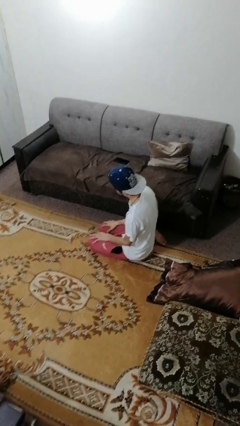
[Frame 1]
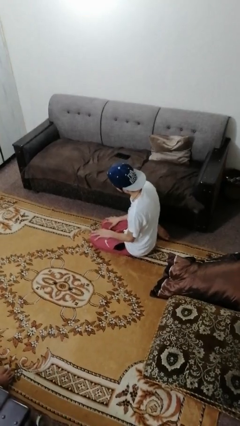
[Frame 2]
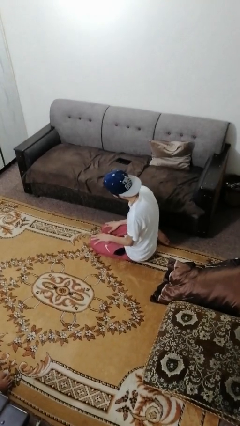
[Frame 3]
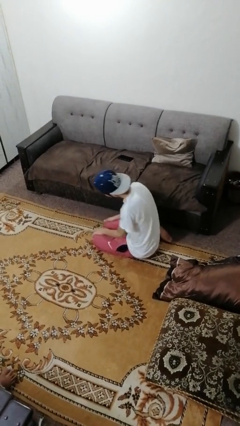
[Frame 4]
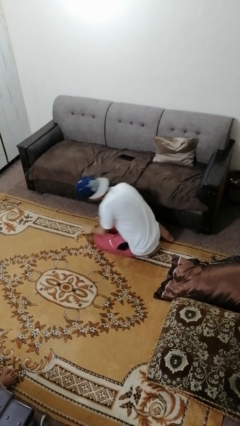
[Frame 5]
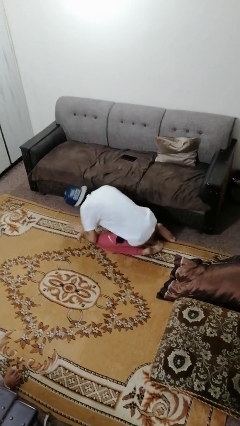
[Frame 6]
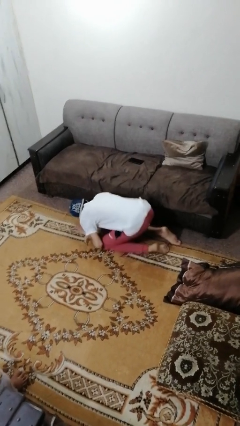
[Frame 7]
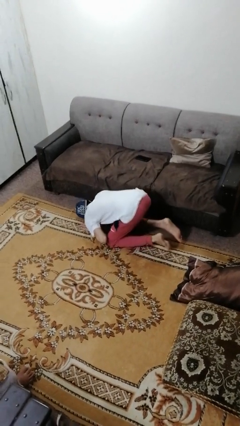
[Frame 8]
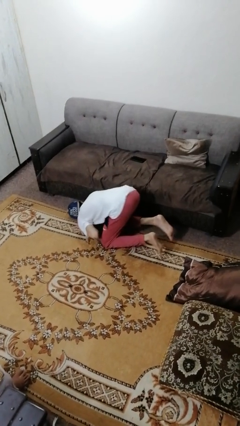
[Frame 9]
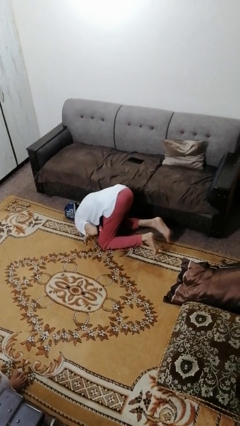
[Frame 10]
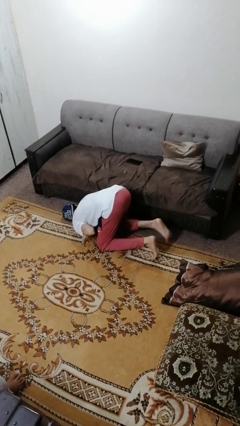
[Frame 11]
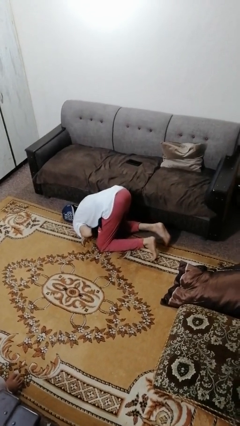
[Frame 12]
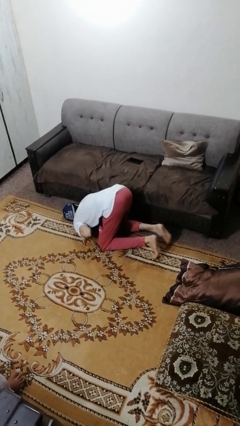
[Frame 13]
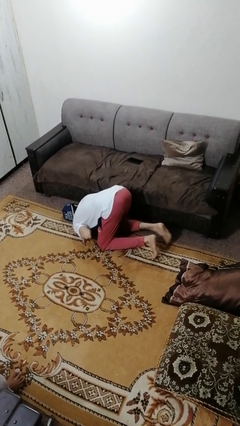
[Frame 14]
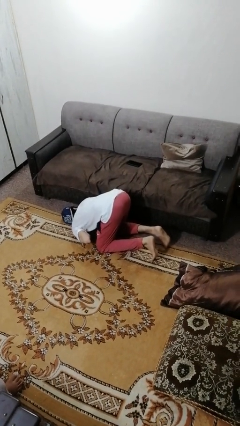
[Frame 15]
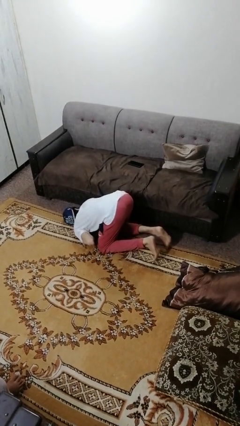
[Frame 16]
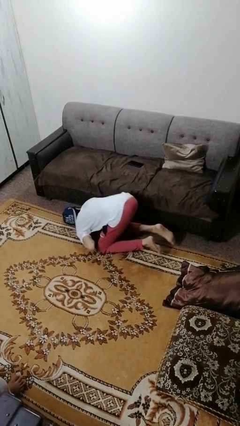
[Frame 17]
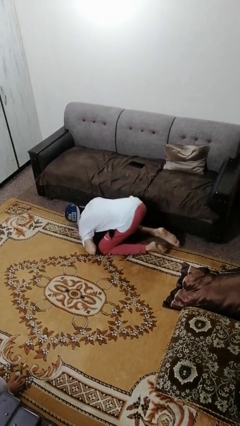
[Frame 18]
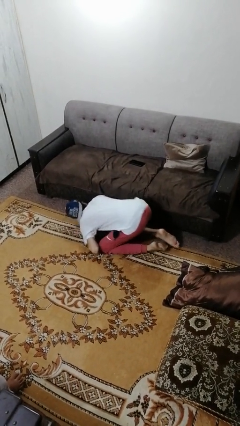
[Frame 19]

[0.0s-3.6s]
person searches under couch

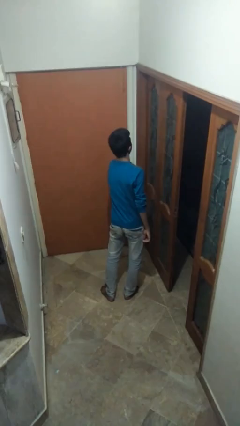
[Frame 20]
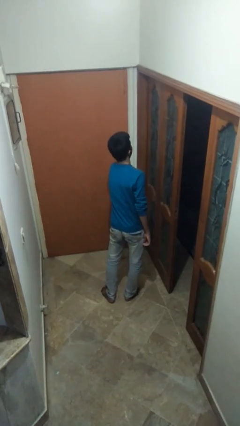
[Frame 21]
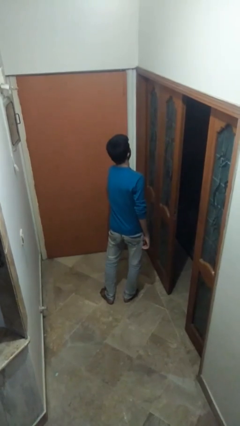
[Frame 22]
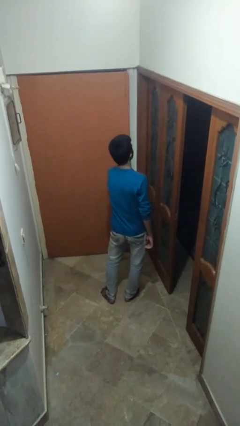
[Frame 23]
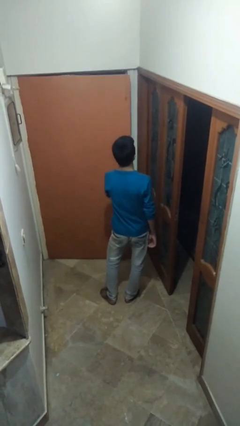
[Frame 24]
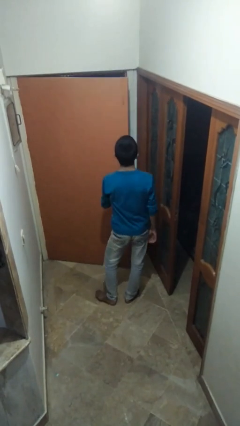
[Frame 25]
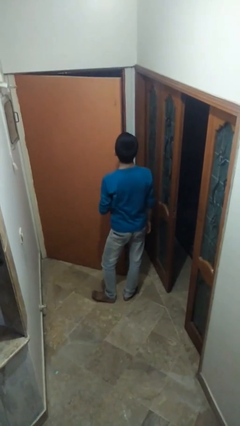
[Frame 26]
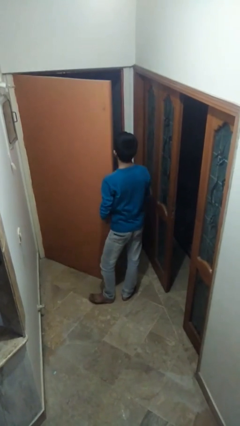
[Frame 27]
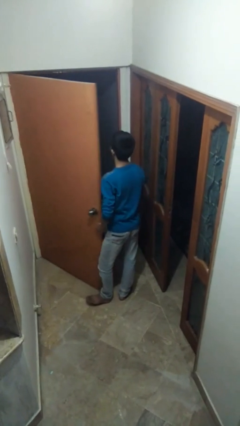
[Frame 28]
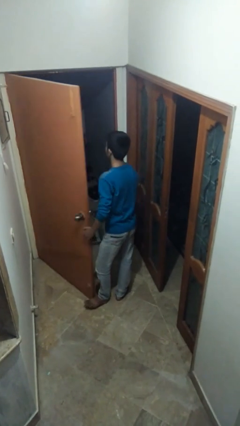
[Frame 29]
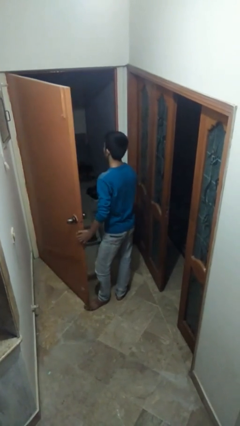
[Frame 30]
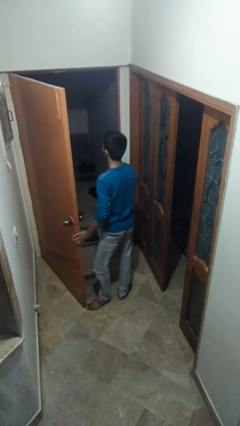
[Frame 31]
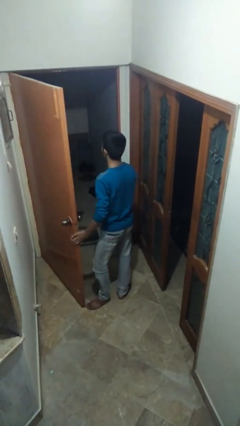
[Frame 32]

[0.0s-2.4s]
person opens facility door

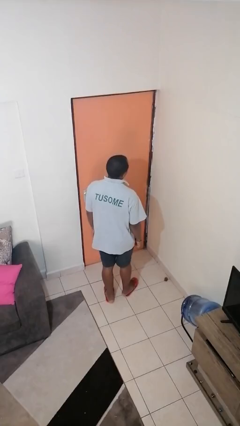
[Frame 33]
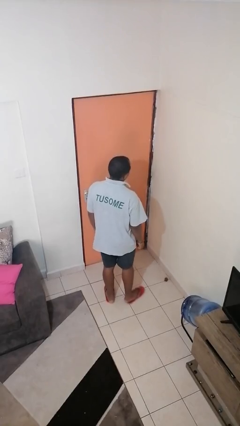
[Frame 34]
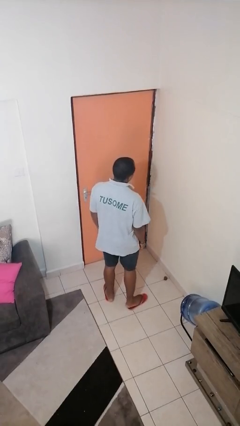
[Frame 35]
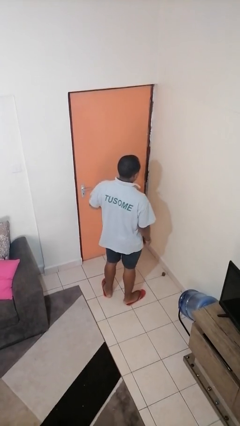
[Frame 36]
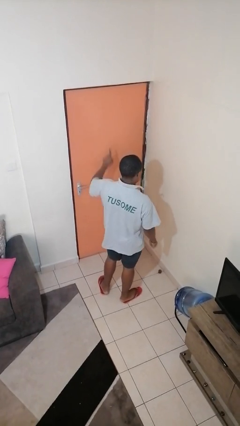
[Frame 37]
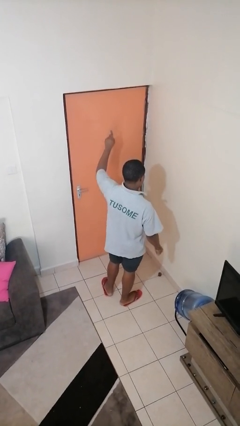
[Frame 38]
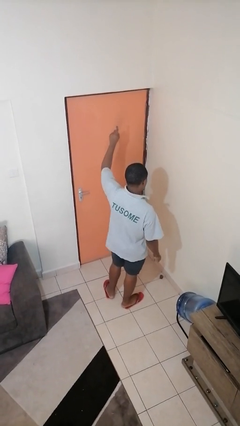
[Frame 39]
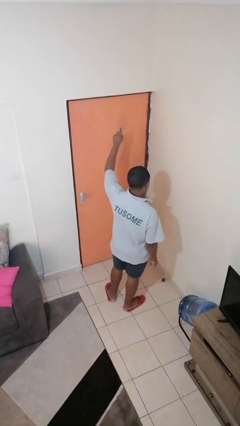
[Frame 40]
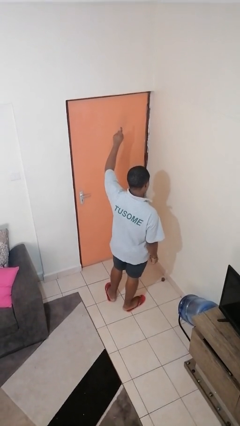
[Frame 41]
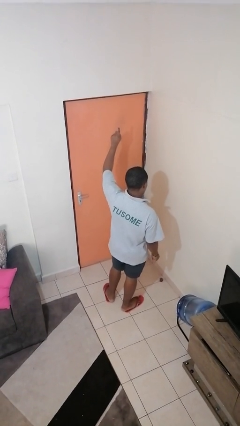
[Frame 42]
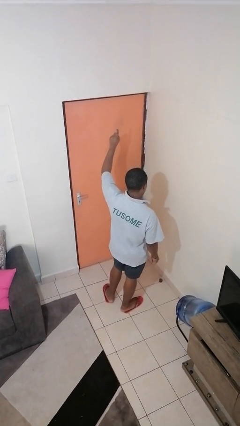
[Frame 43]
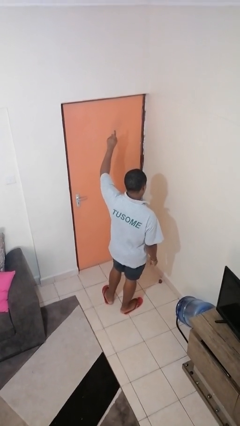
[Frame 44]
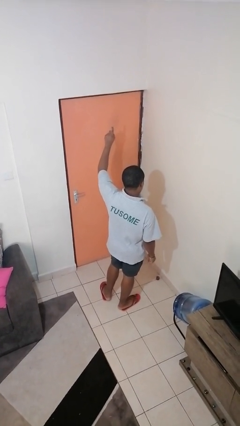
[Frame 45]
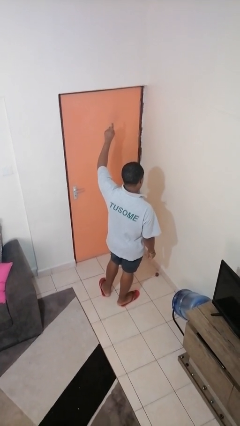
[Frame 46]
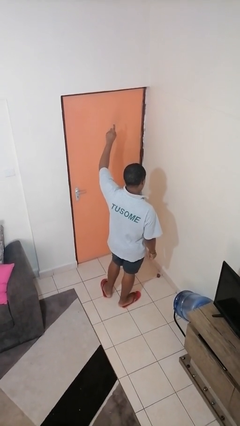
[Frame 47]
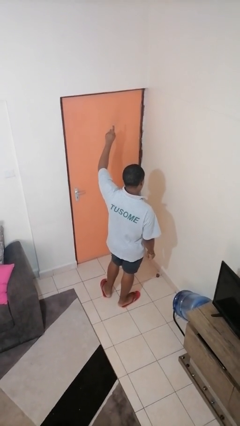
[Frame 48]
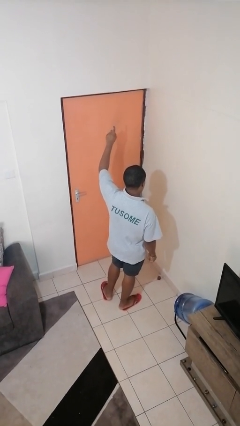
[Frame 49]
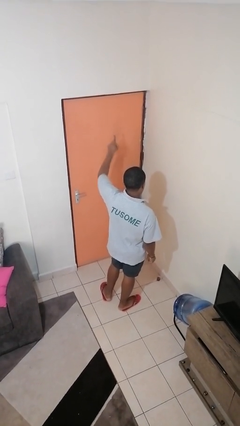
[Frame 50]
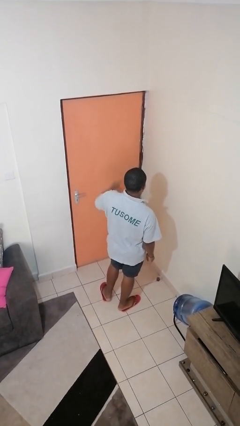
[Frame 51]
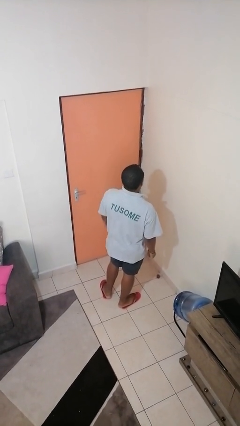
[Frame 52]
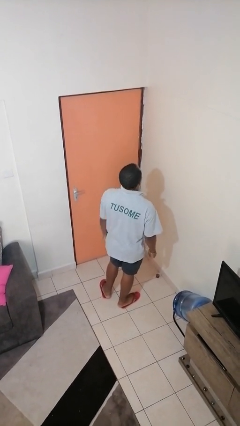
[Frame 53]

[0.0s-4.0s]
person gestures number one

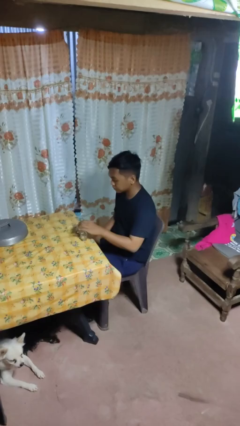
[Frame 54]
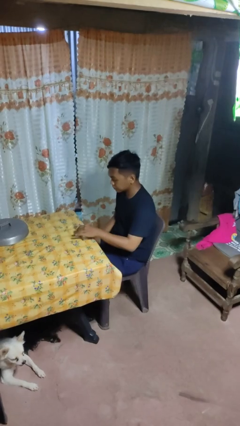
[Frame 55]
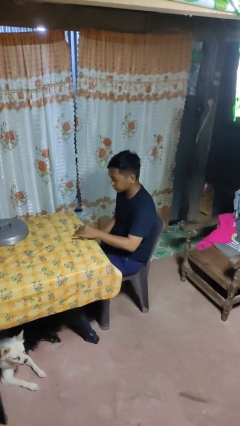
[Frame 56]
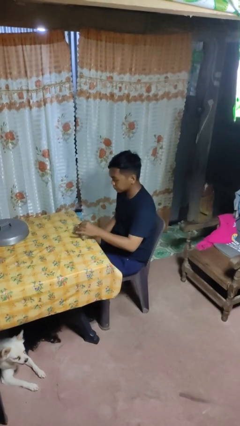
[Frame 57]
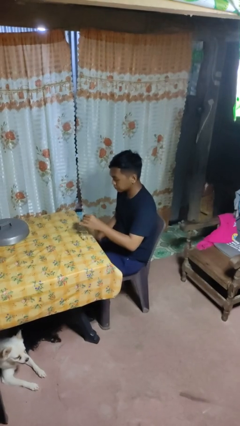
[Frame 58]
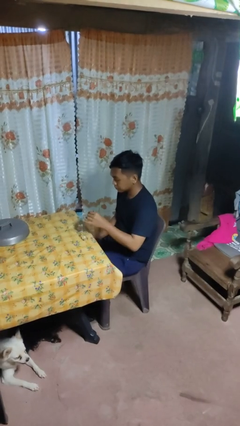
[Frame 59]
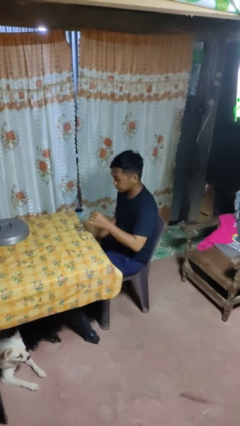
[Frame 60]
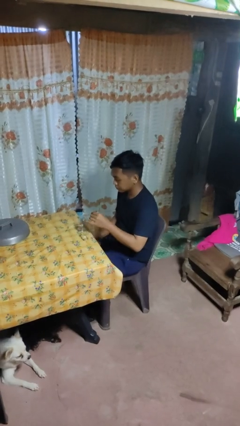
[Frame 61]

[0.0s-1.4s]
person picks up object from table

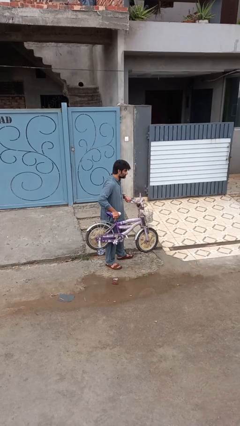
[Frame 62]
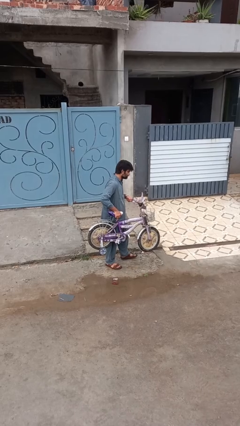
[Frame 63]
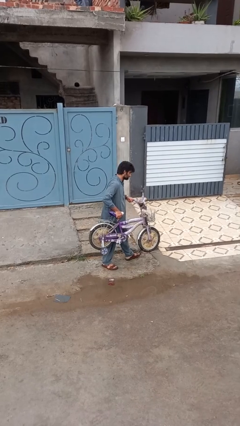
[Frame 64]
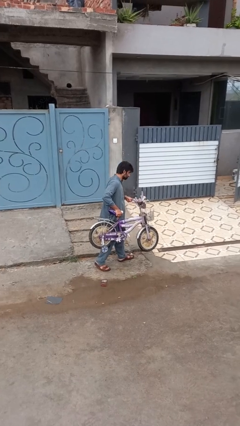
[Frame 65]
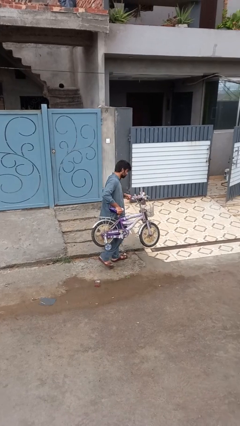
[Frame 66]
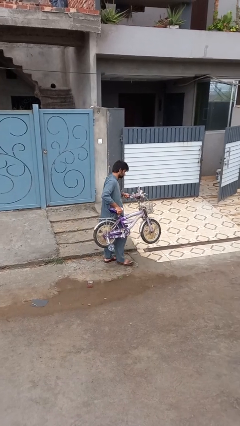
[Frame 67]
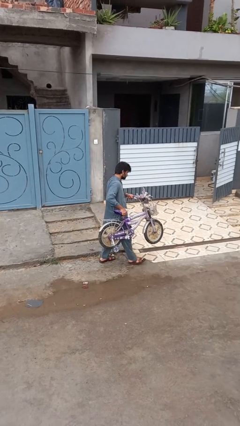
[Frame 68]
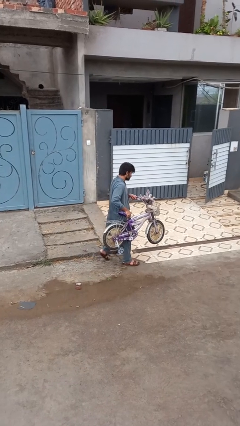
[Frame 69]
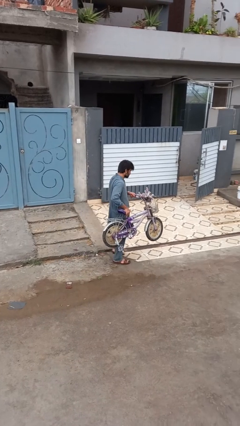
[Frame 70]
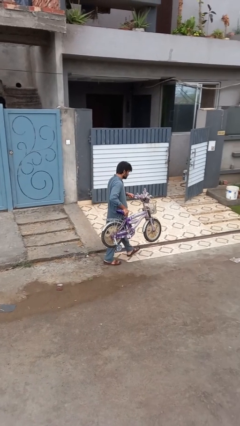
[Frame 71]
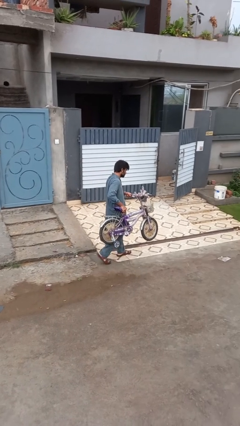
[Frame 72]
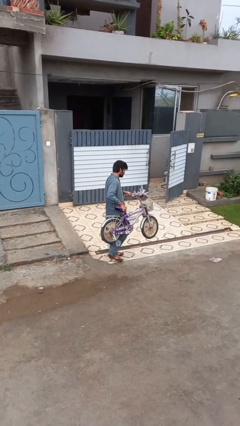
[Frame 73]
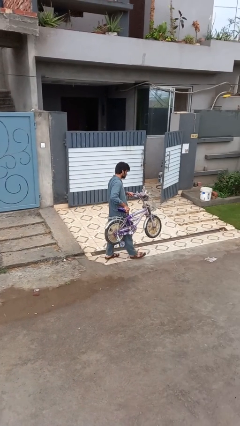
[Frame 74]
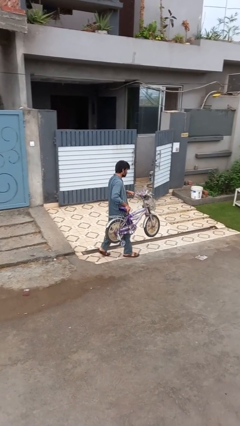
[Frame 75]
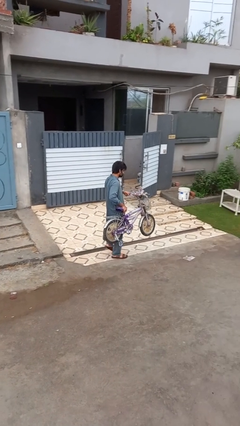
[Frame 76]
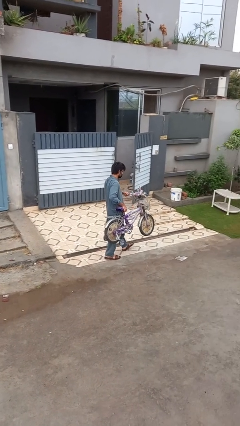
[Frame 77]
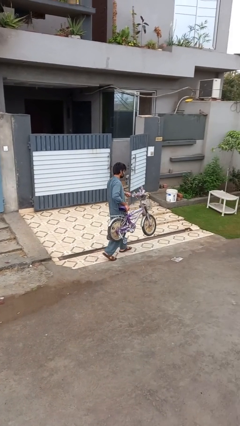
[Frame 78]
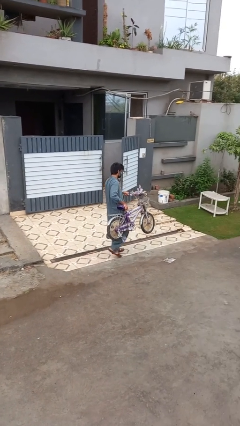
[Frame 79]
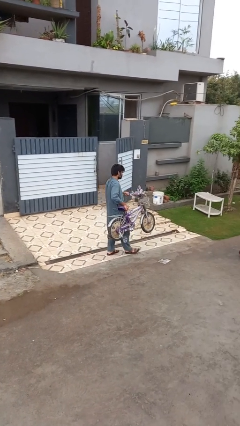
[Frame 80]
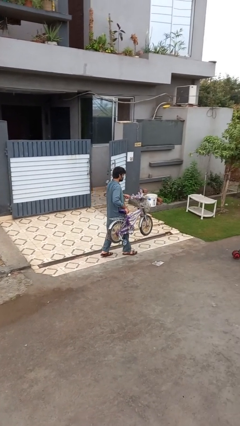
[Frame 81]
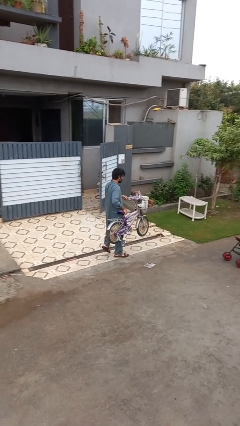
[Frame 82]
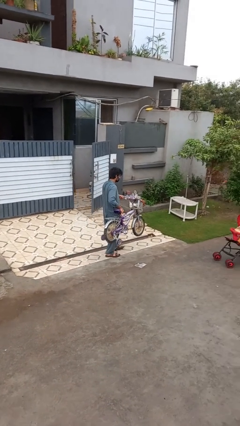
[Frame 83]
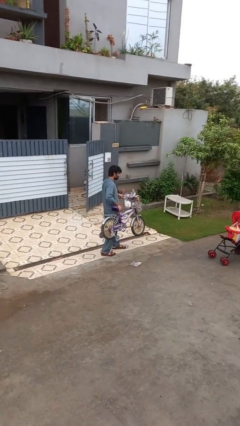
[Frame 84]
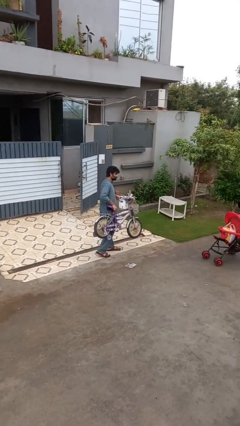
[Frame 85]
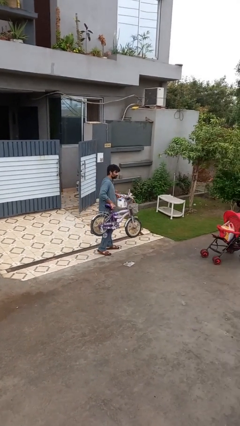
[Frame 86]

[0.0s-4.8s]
person carries bicycle

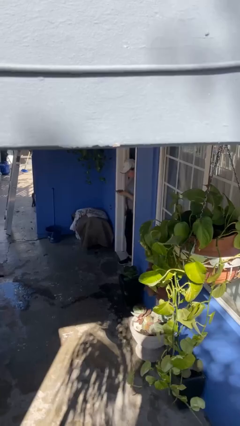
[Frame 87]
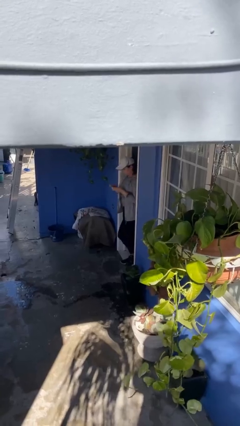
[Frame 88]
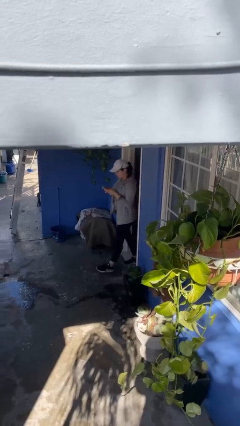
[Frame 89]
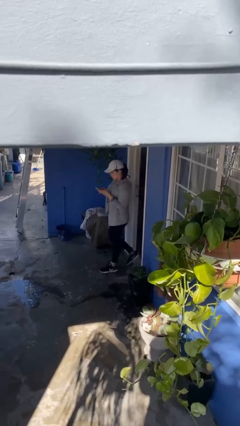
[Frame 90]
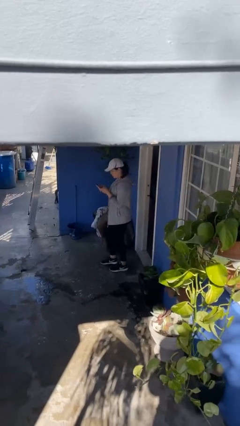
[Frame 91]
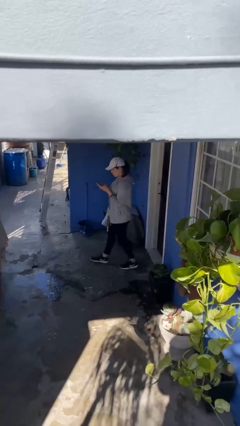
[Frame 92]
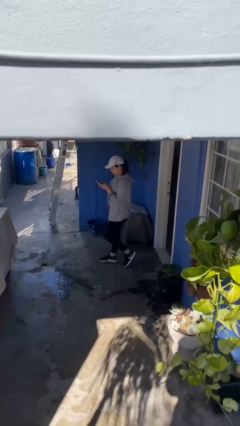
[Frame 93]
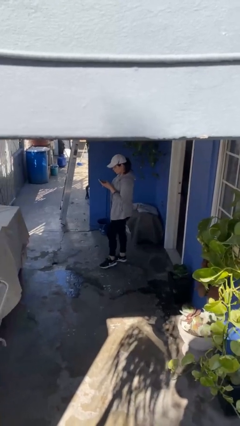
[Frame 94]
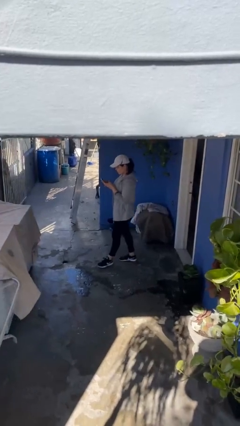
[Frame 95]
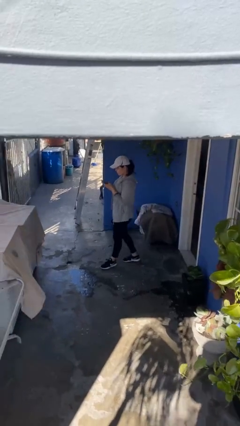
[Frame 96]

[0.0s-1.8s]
person enters scene through structure
